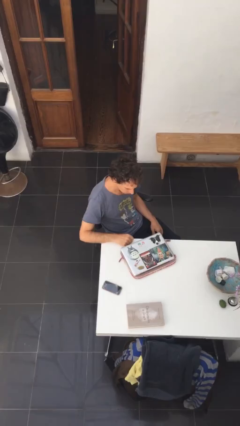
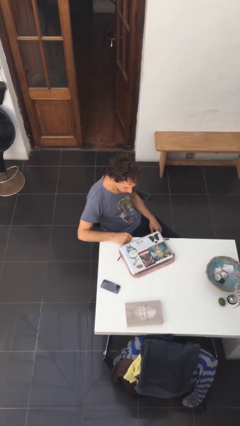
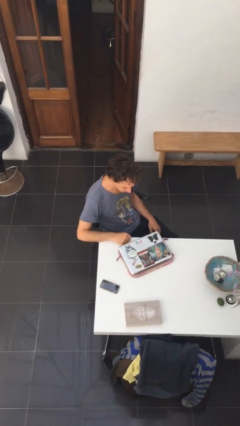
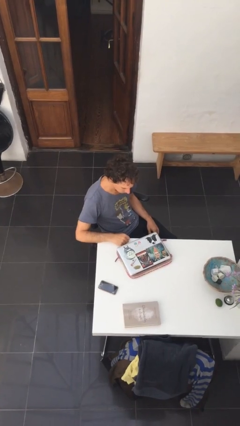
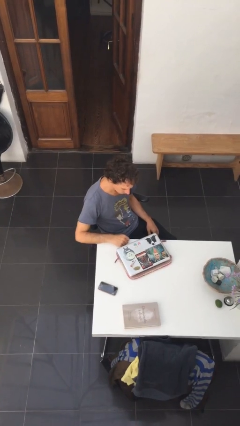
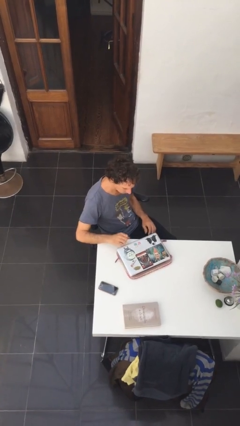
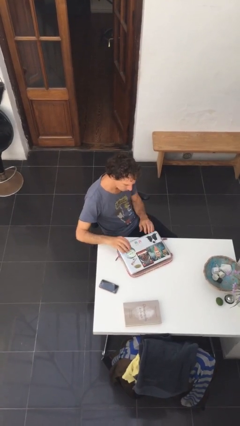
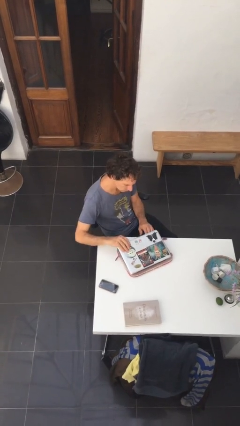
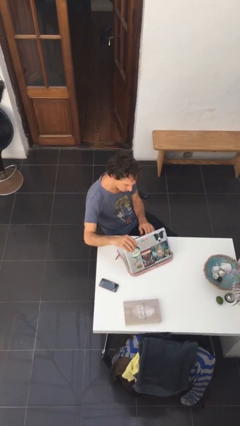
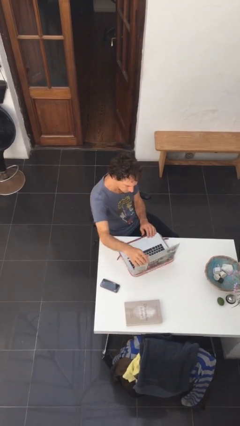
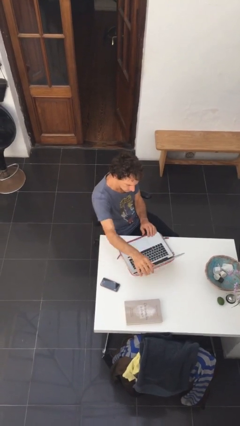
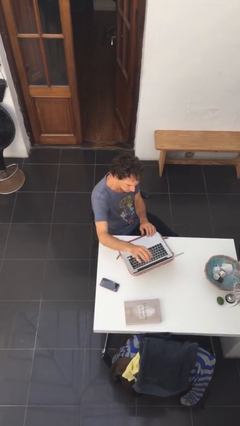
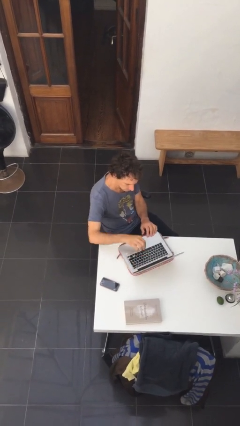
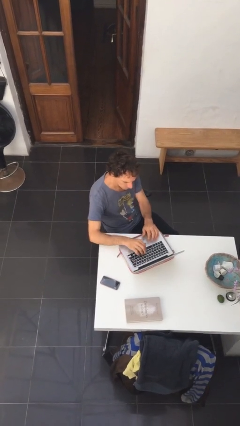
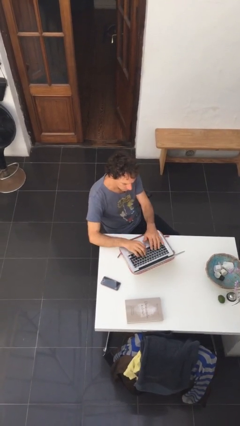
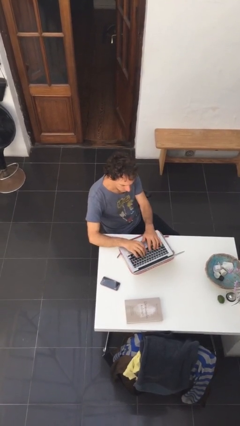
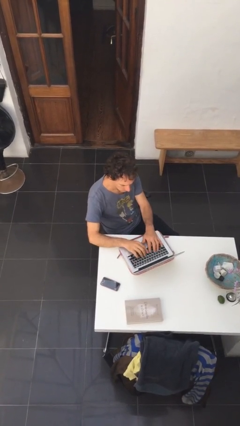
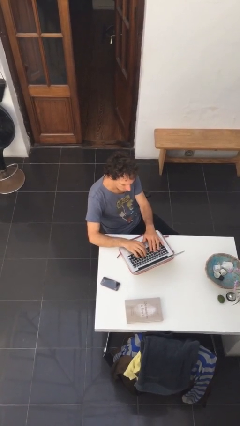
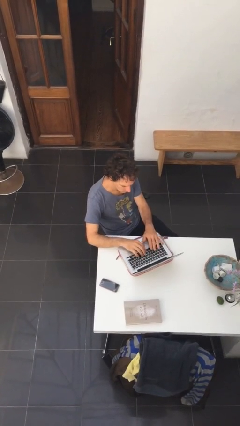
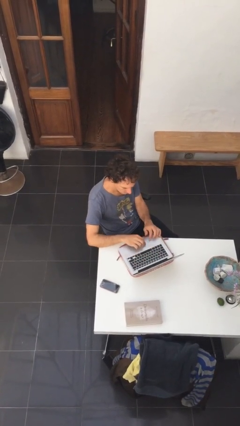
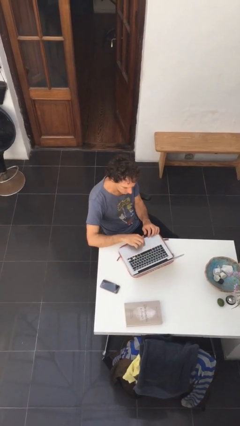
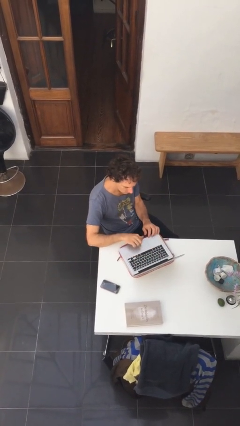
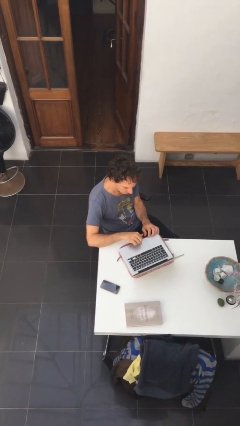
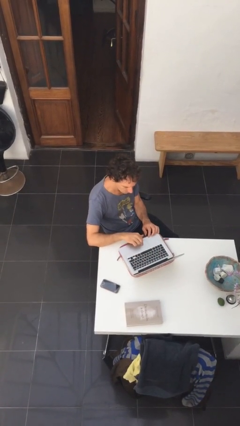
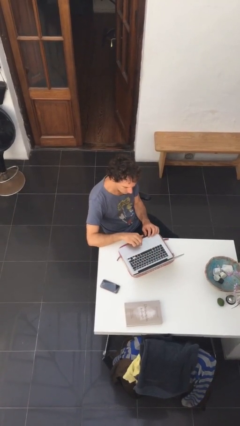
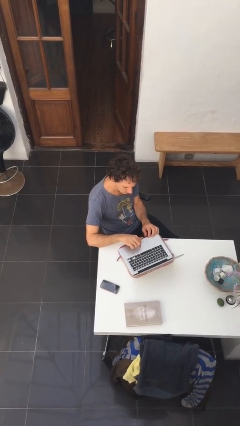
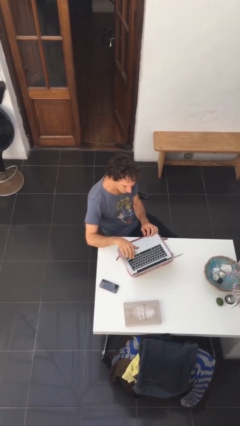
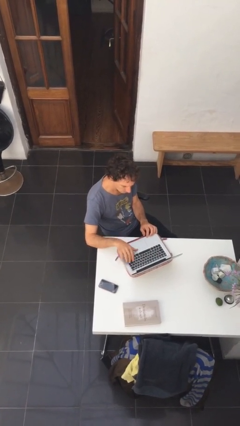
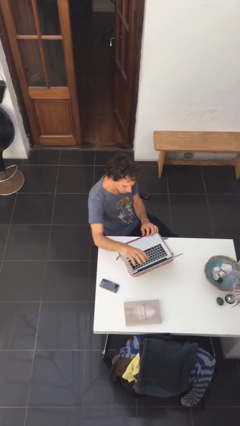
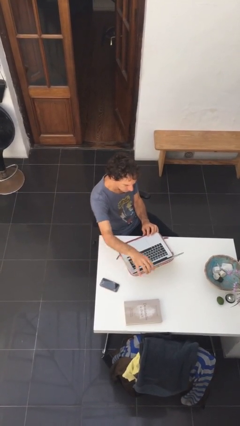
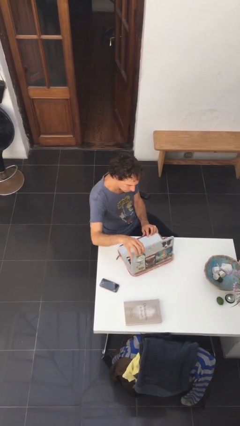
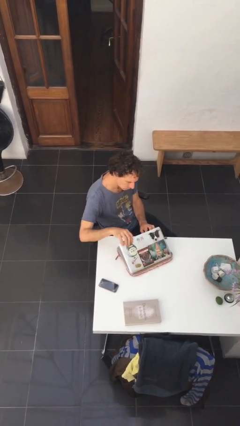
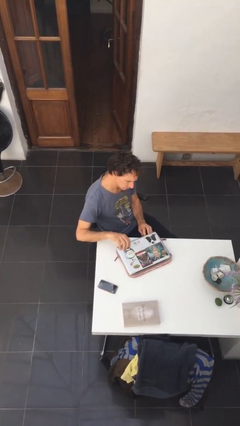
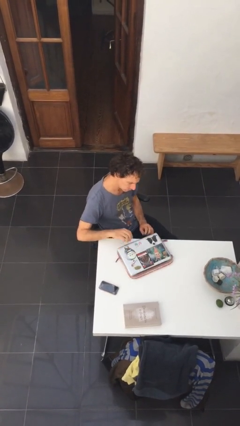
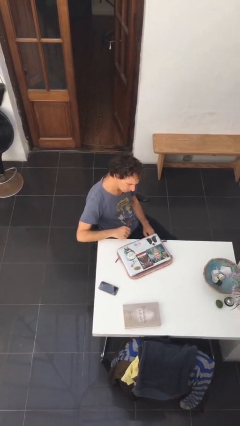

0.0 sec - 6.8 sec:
person interacts with laptop

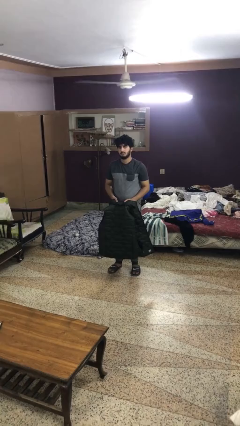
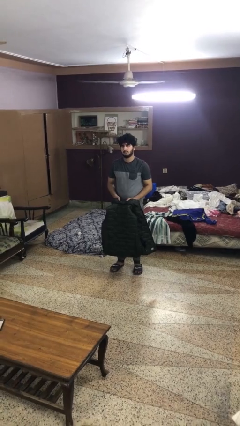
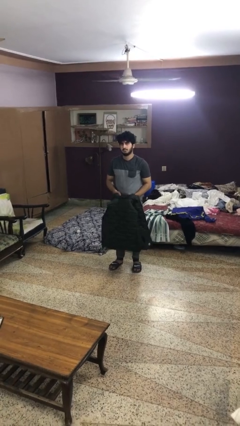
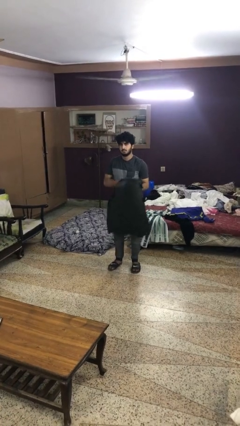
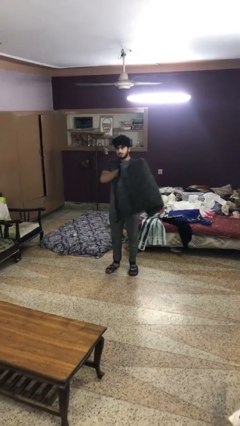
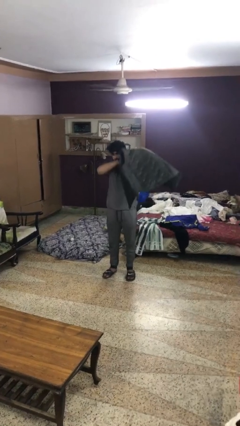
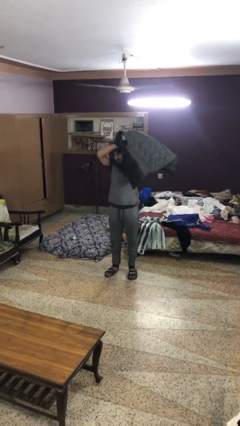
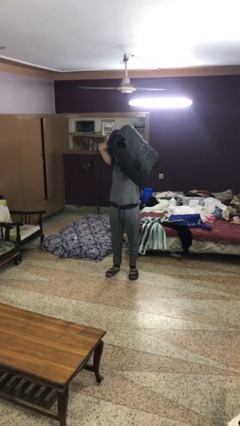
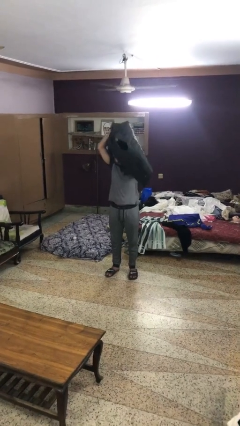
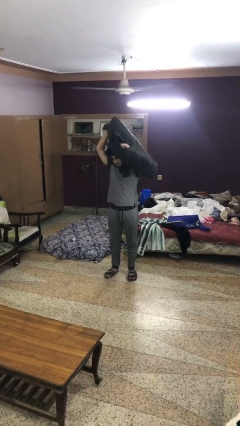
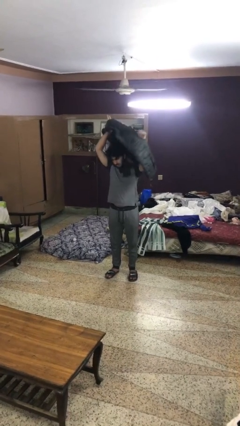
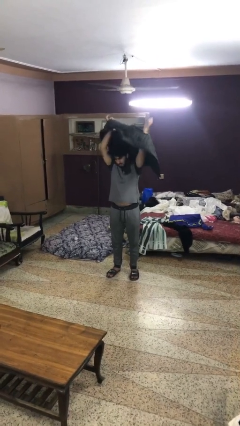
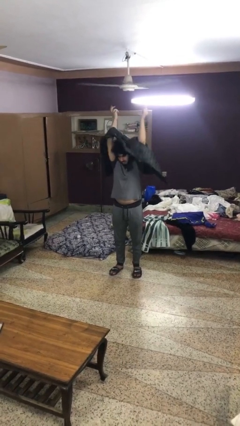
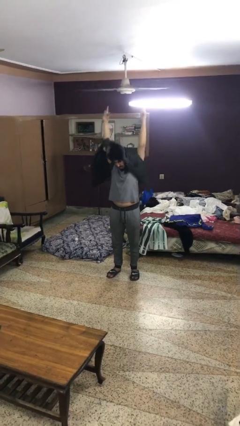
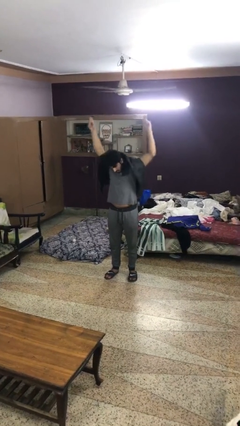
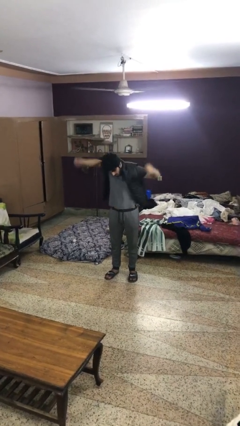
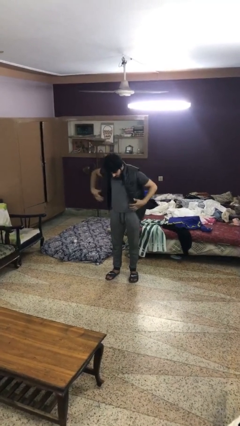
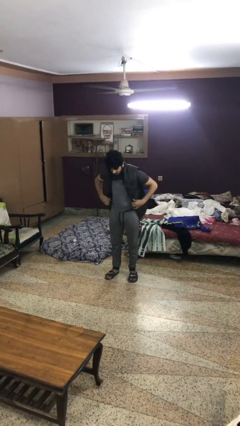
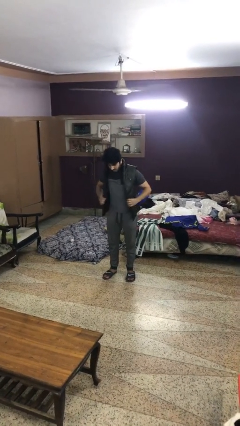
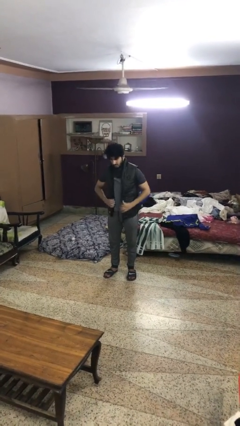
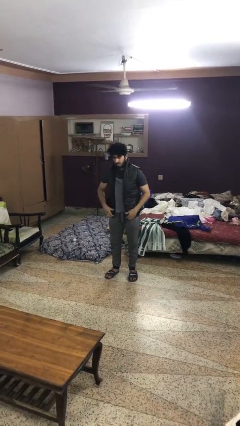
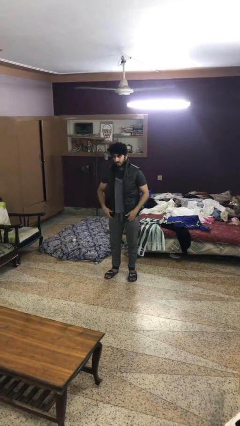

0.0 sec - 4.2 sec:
person puts on jacket

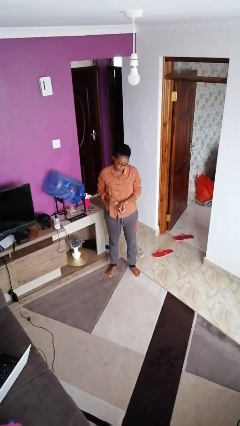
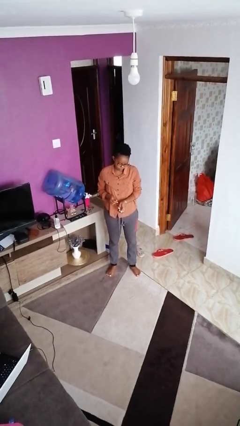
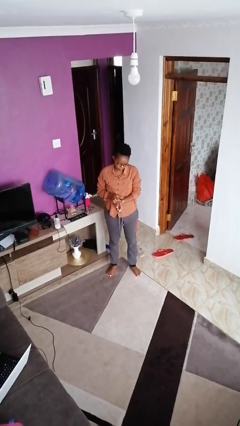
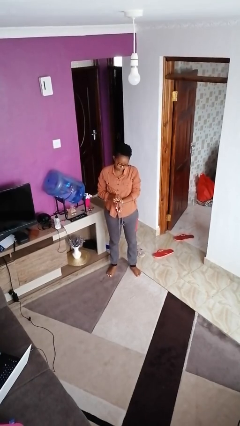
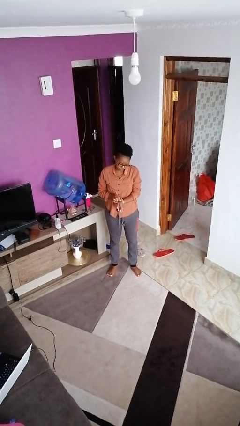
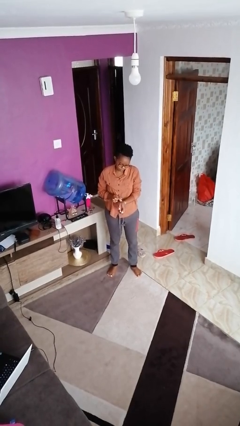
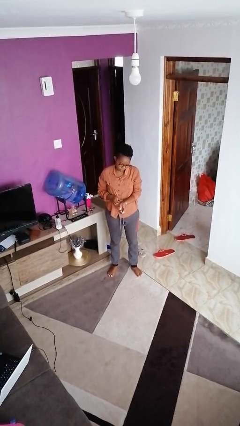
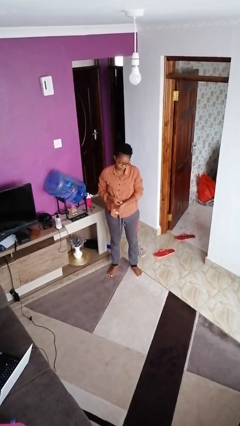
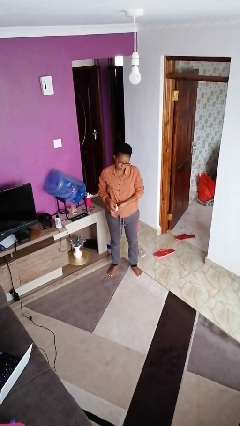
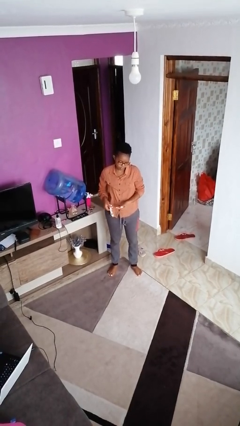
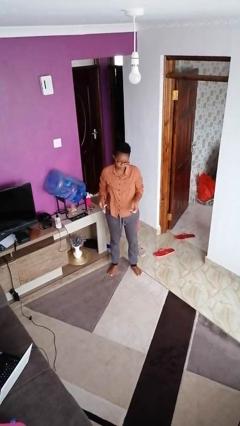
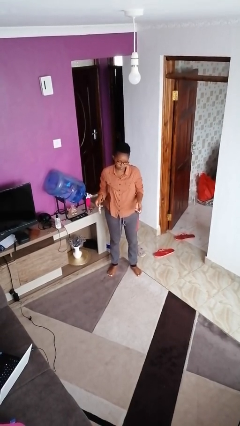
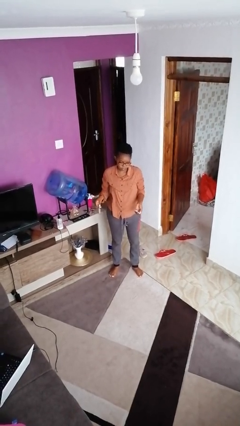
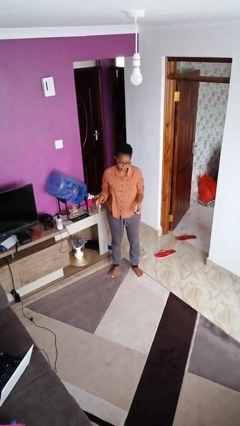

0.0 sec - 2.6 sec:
person takes off wristwatch

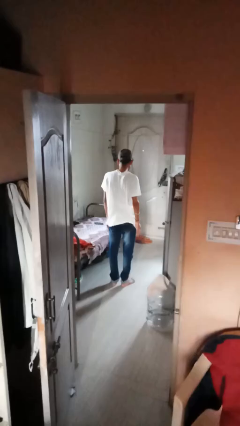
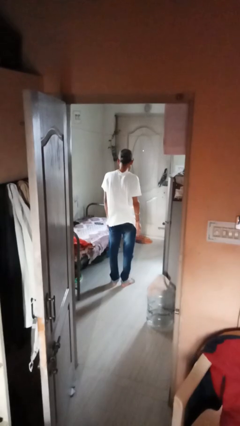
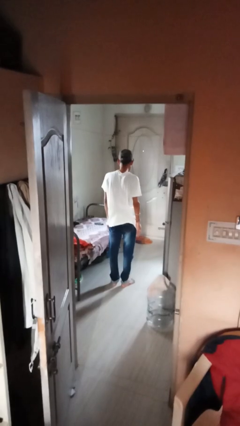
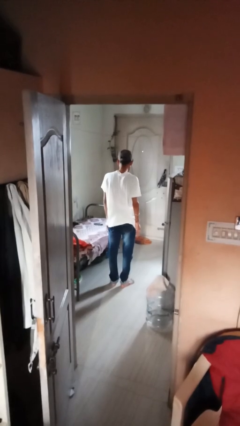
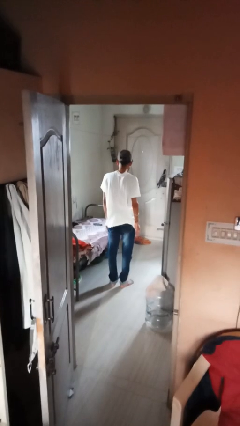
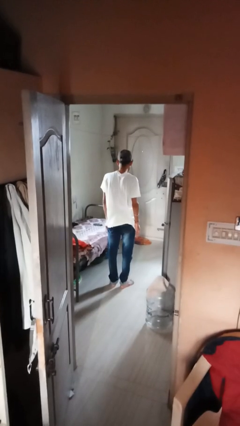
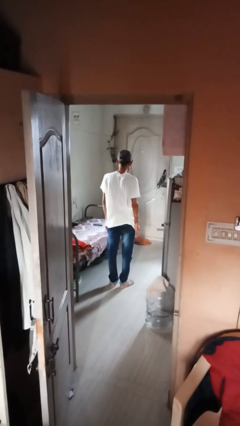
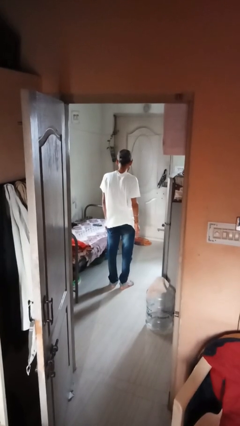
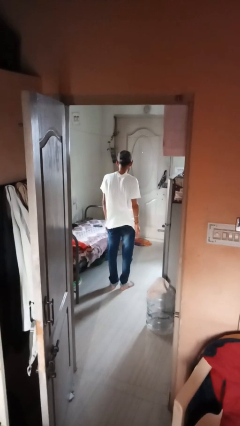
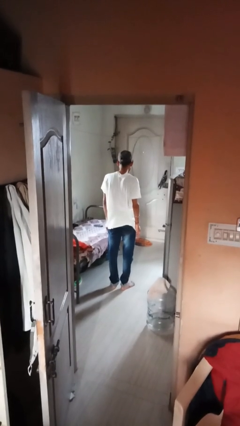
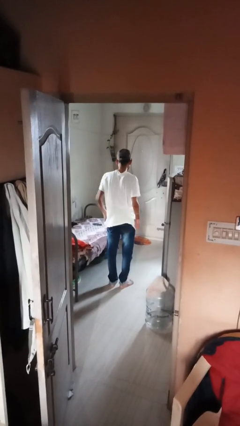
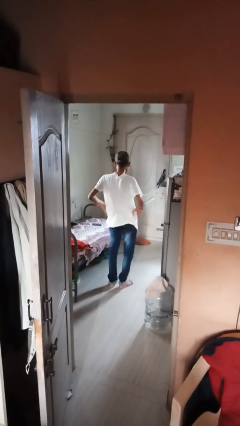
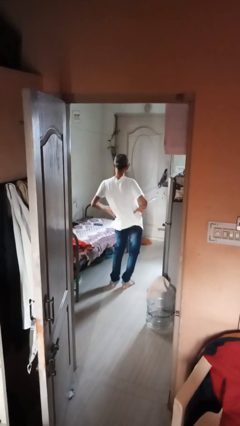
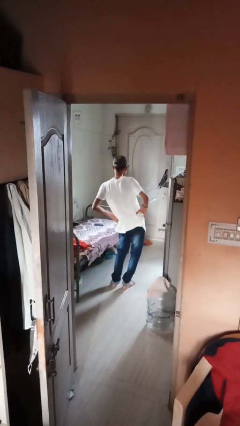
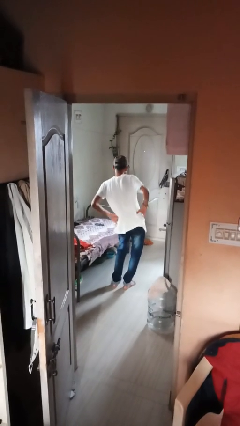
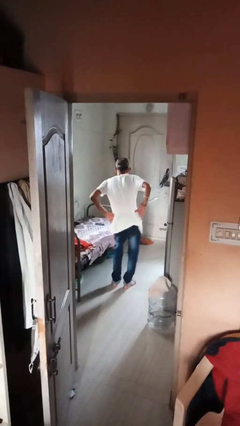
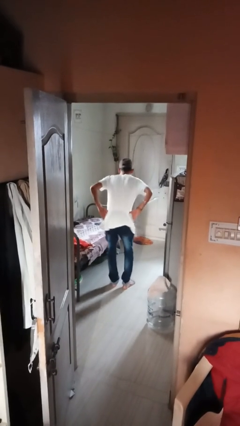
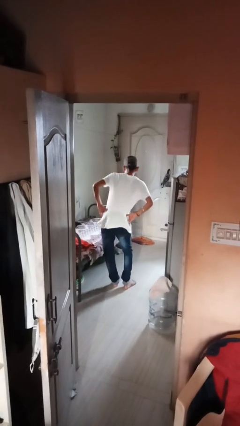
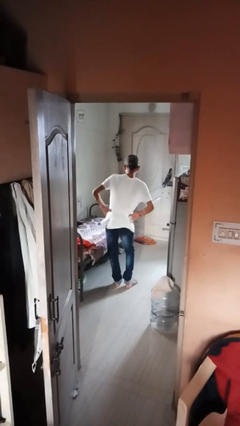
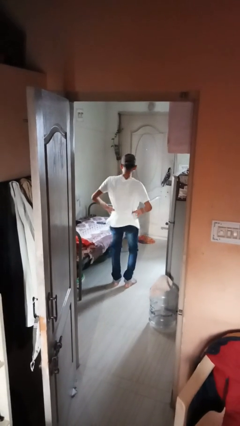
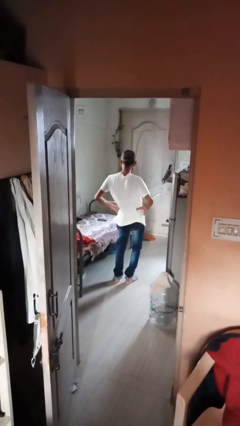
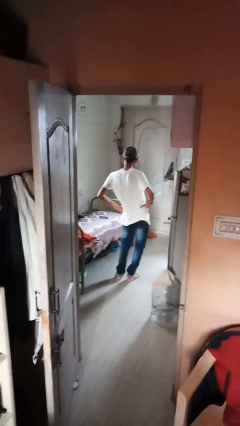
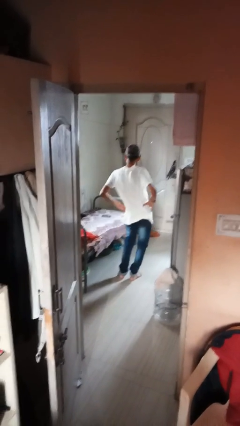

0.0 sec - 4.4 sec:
person wiggles hips
